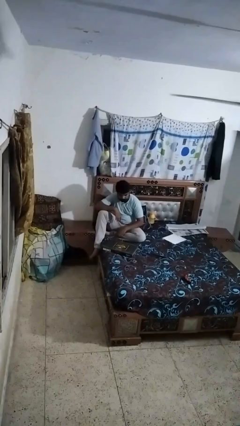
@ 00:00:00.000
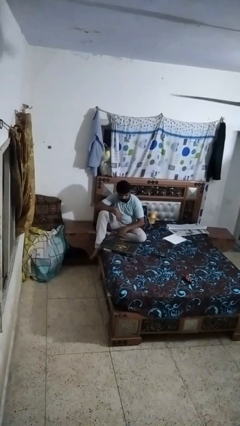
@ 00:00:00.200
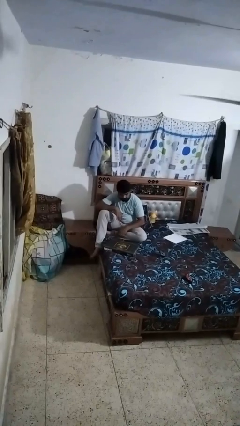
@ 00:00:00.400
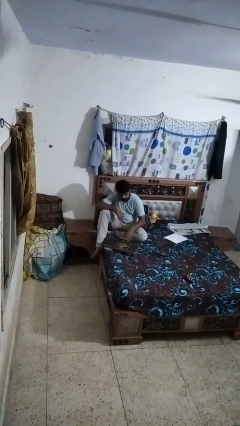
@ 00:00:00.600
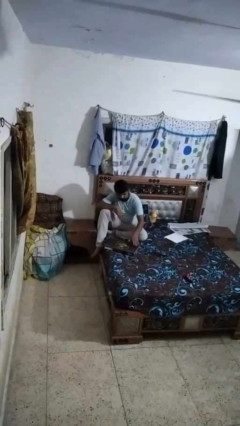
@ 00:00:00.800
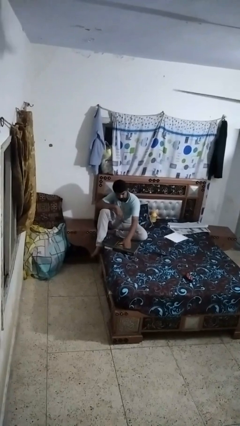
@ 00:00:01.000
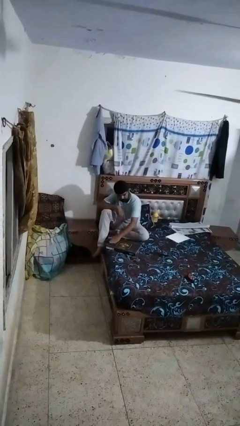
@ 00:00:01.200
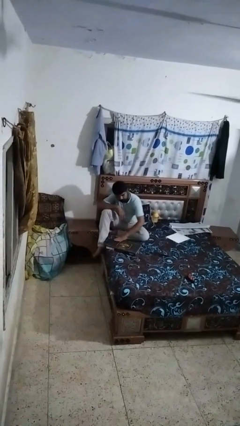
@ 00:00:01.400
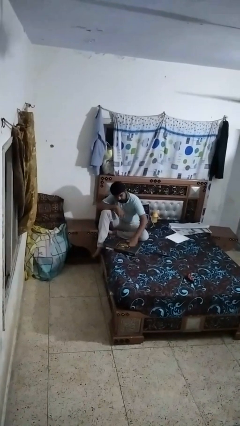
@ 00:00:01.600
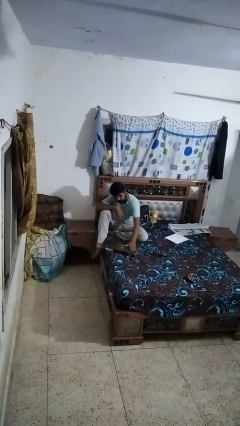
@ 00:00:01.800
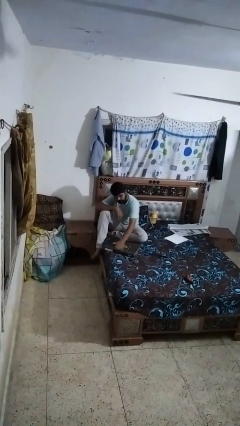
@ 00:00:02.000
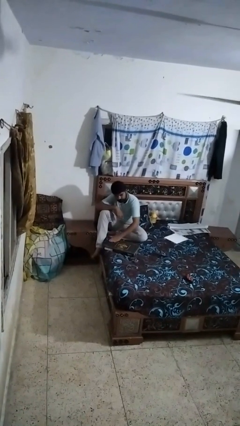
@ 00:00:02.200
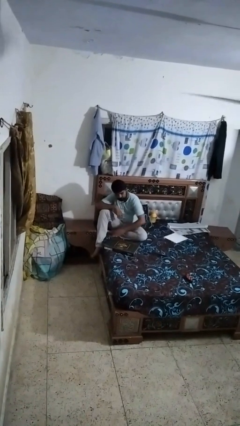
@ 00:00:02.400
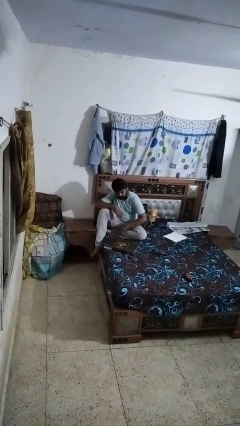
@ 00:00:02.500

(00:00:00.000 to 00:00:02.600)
person waves hand over object

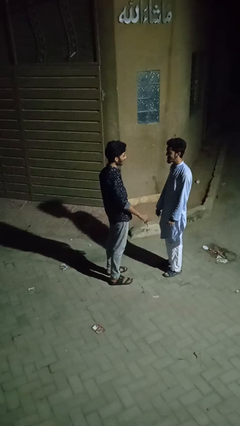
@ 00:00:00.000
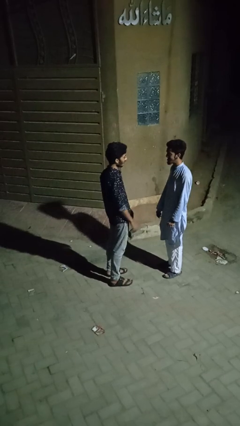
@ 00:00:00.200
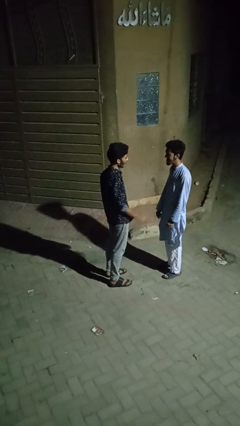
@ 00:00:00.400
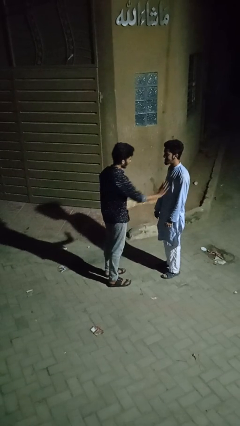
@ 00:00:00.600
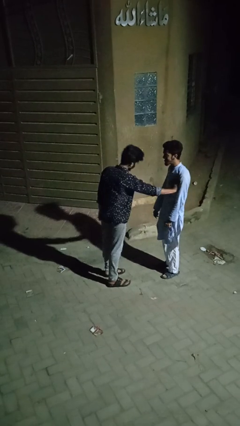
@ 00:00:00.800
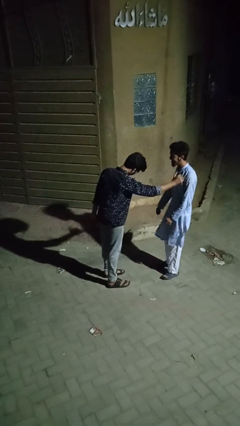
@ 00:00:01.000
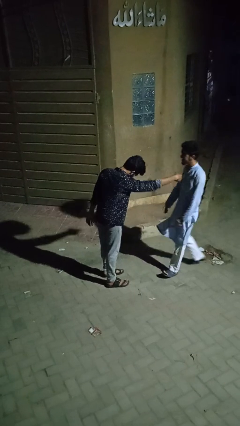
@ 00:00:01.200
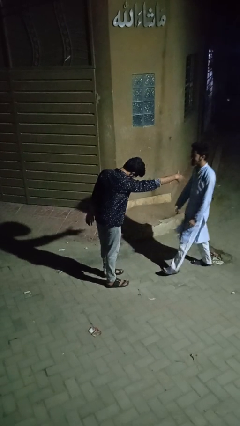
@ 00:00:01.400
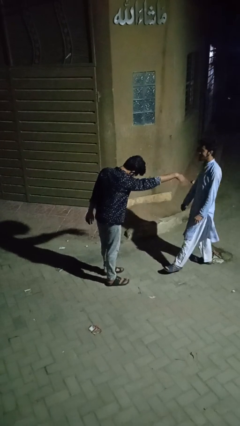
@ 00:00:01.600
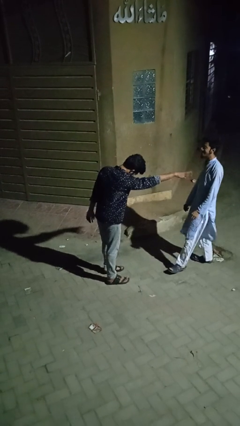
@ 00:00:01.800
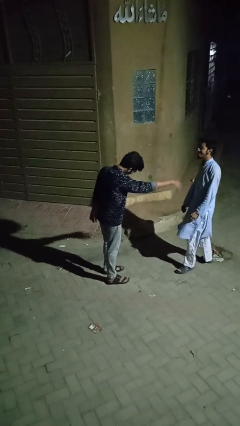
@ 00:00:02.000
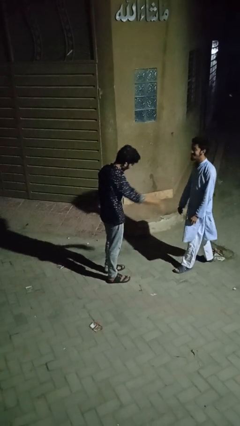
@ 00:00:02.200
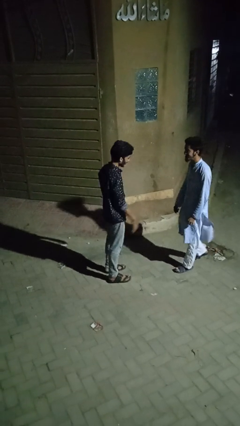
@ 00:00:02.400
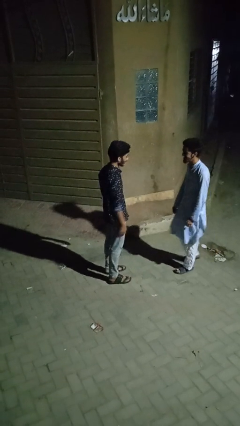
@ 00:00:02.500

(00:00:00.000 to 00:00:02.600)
person shoves person

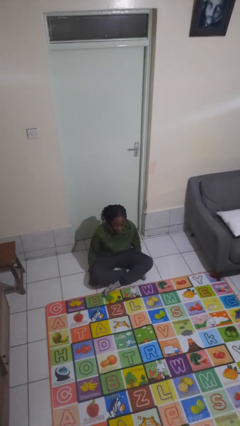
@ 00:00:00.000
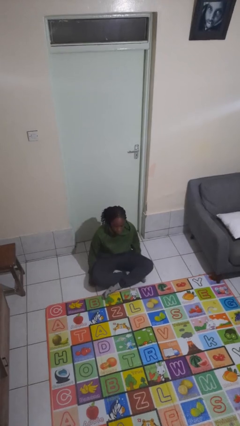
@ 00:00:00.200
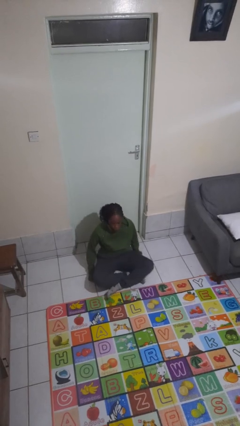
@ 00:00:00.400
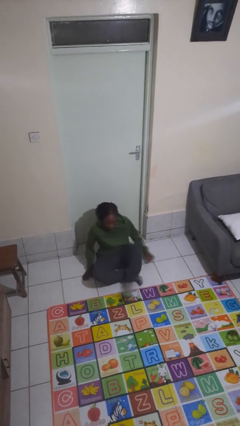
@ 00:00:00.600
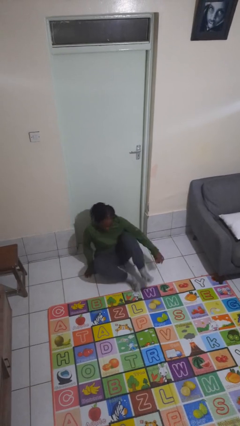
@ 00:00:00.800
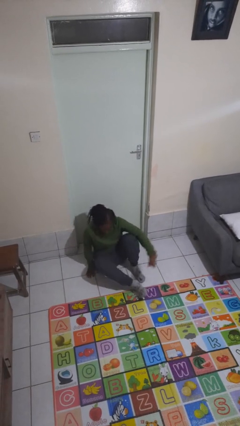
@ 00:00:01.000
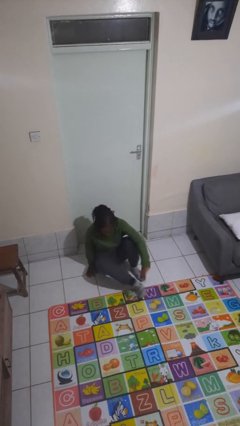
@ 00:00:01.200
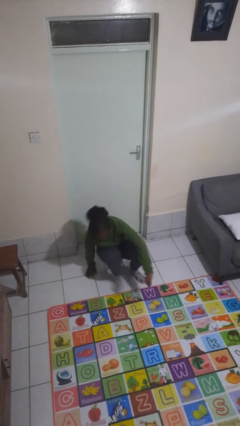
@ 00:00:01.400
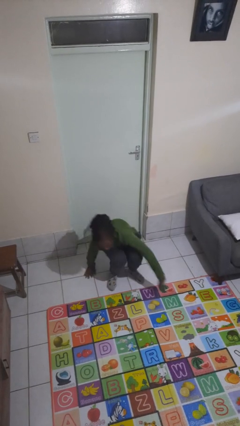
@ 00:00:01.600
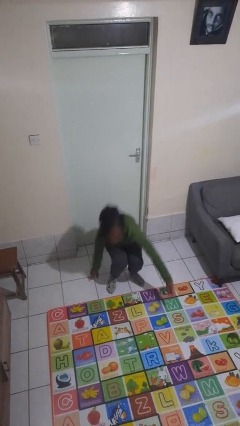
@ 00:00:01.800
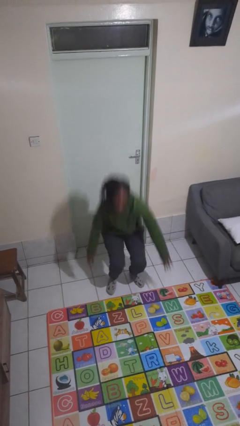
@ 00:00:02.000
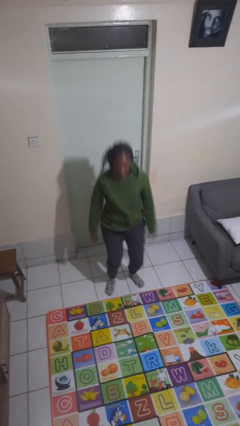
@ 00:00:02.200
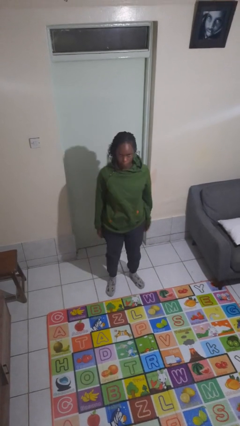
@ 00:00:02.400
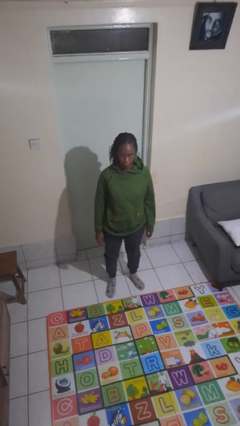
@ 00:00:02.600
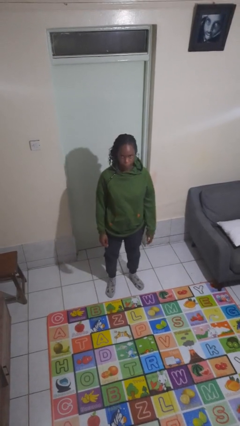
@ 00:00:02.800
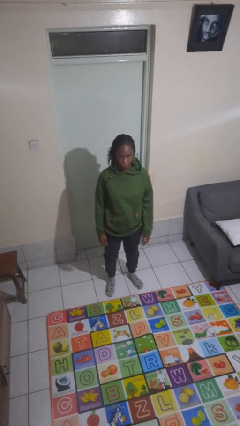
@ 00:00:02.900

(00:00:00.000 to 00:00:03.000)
person stands up from floor

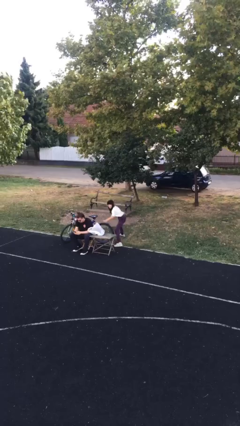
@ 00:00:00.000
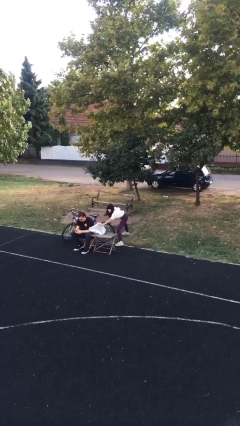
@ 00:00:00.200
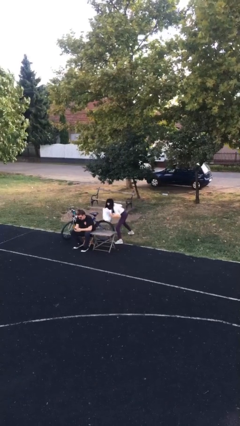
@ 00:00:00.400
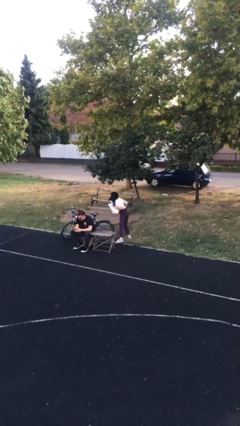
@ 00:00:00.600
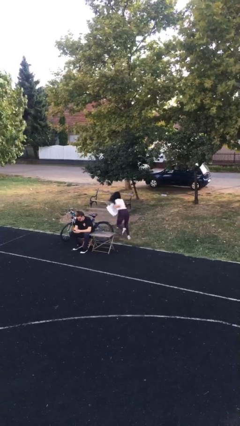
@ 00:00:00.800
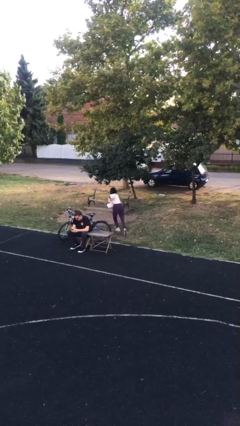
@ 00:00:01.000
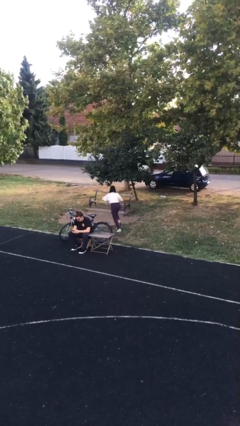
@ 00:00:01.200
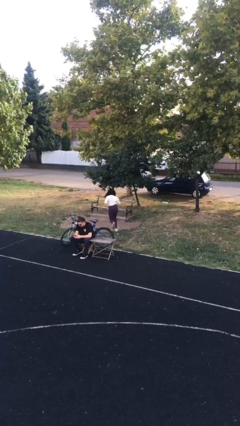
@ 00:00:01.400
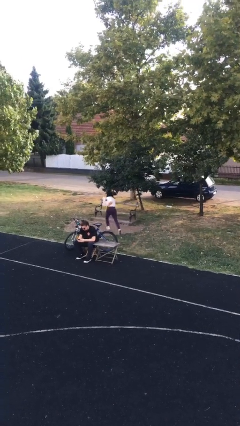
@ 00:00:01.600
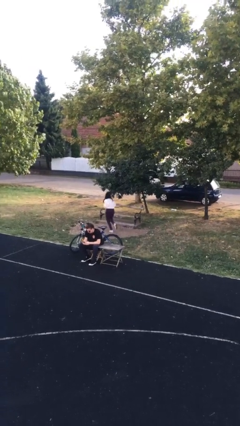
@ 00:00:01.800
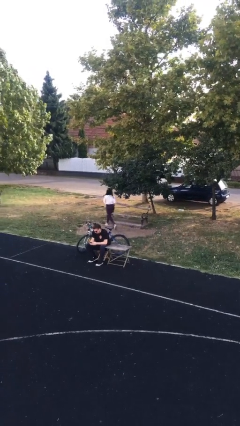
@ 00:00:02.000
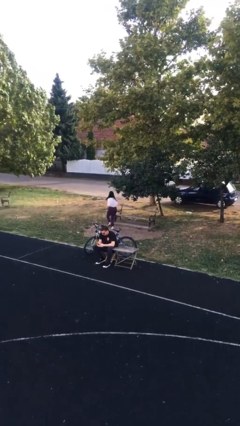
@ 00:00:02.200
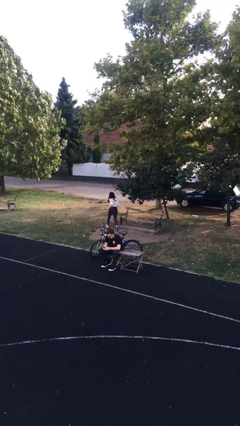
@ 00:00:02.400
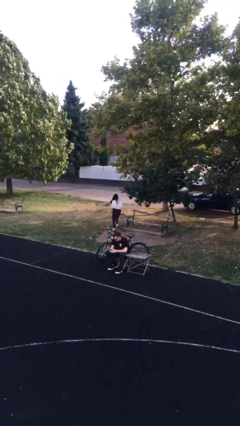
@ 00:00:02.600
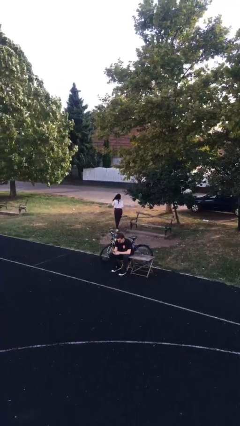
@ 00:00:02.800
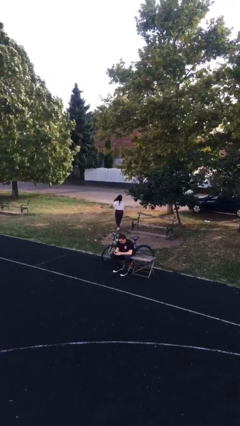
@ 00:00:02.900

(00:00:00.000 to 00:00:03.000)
person steals object from person

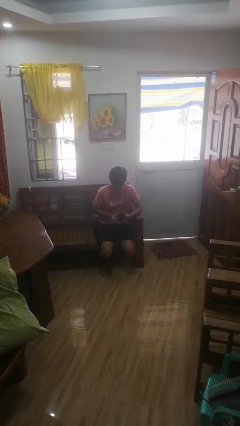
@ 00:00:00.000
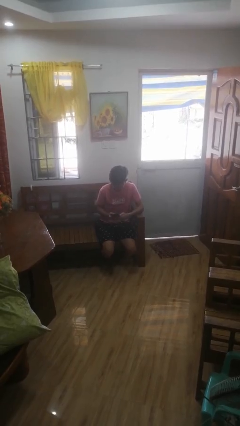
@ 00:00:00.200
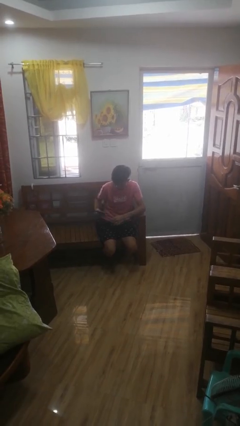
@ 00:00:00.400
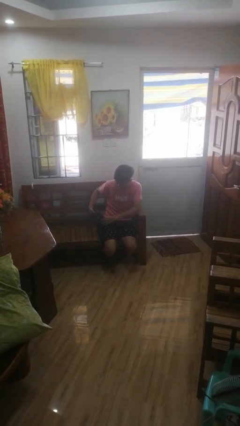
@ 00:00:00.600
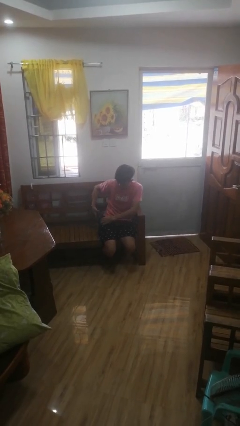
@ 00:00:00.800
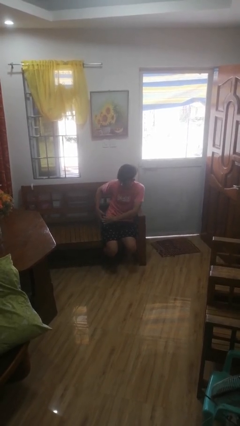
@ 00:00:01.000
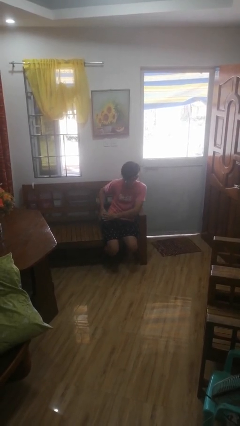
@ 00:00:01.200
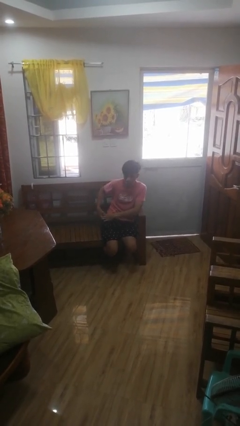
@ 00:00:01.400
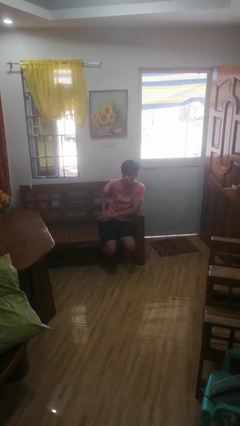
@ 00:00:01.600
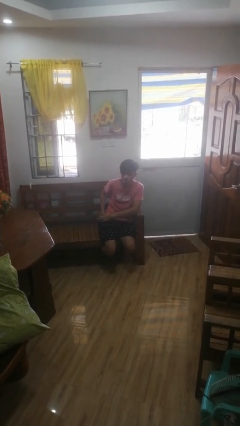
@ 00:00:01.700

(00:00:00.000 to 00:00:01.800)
person puts phone into pocket

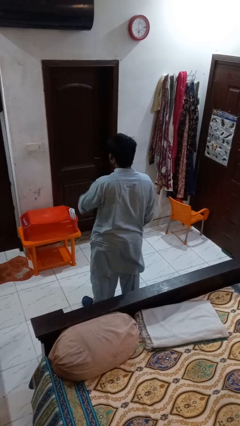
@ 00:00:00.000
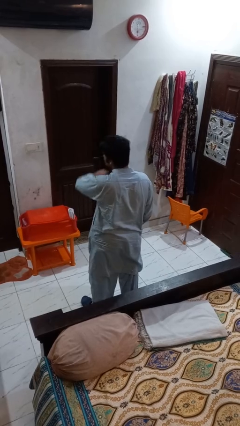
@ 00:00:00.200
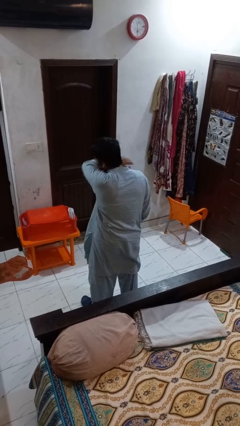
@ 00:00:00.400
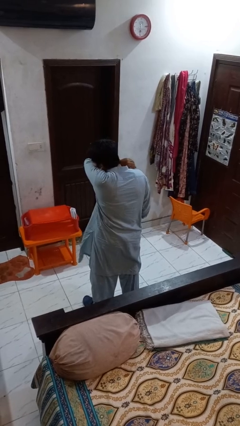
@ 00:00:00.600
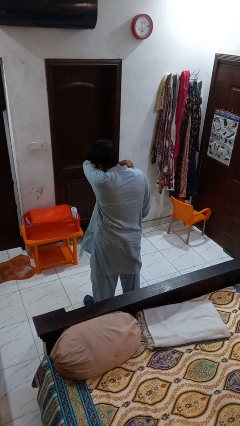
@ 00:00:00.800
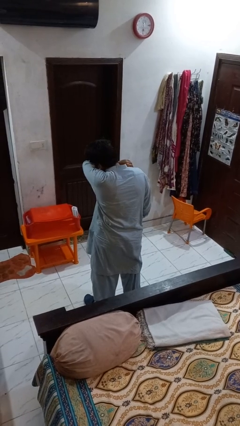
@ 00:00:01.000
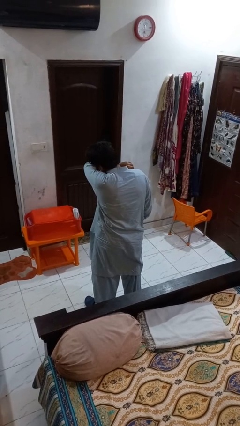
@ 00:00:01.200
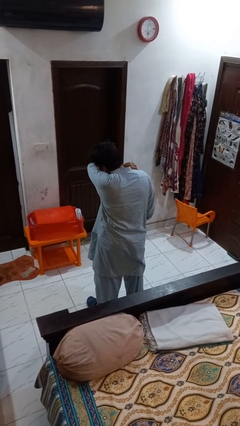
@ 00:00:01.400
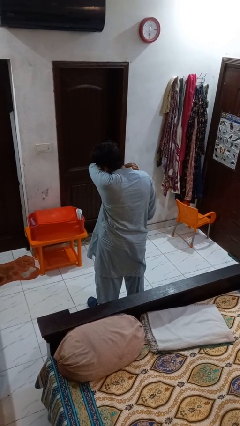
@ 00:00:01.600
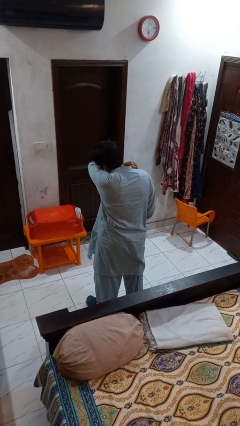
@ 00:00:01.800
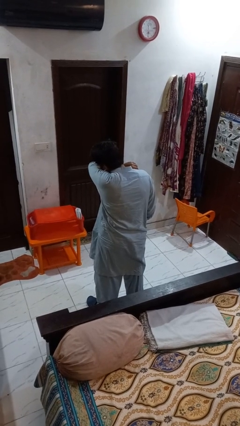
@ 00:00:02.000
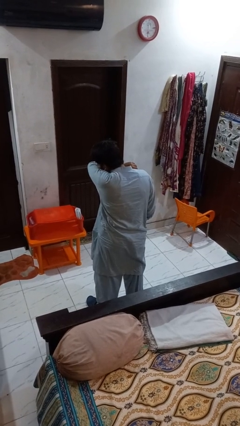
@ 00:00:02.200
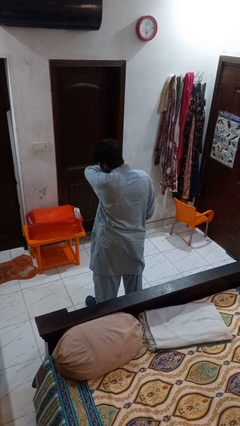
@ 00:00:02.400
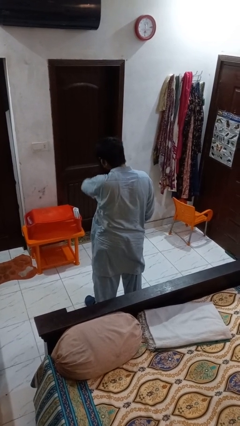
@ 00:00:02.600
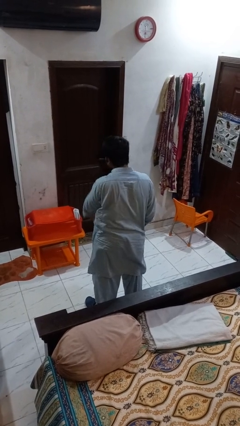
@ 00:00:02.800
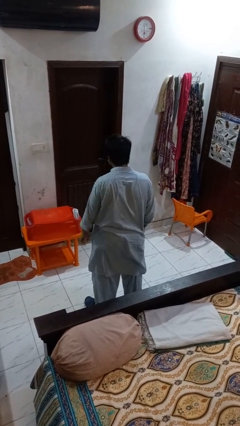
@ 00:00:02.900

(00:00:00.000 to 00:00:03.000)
person sneezes into arm

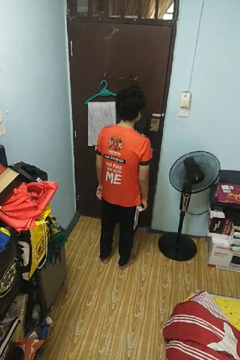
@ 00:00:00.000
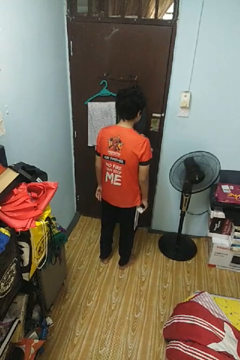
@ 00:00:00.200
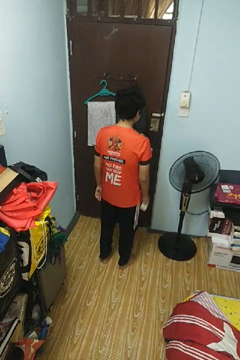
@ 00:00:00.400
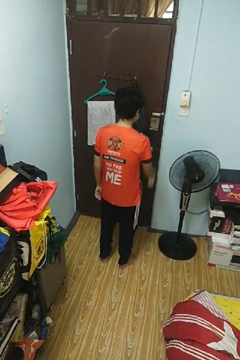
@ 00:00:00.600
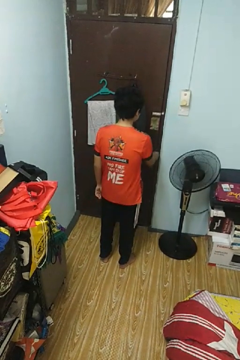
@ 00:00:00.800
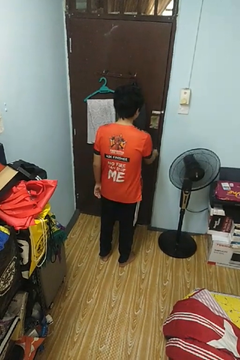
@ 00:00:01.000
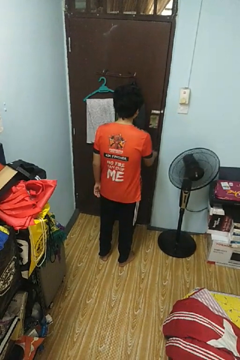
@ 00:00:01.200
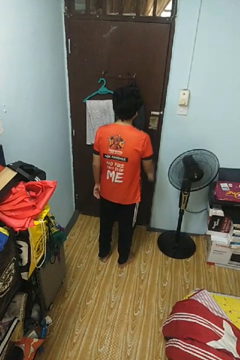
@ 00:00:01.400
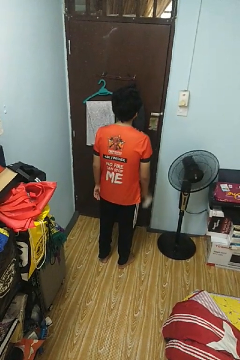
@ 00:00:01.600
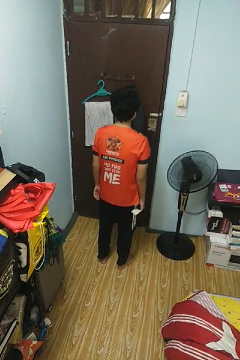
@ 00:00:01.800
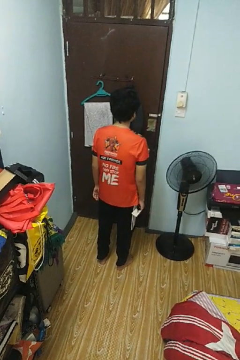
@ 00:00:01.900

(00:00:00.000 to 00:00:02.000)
person unlocks door with keys
